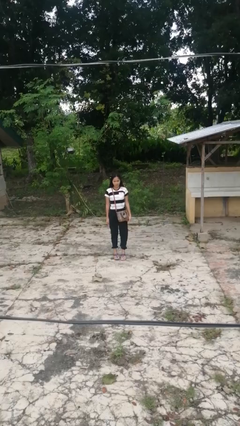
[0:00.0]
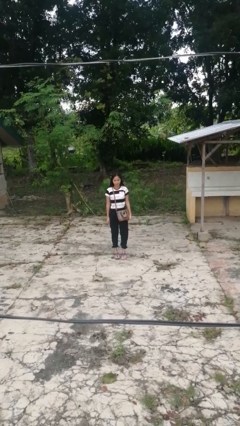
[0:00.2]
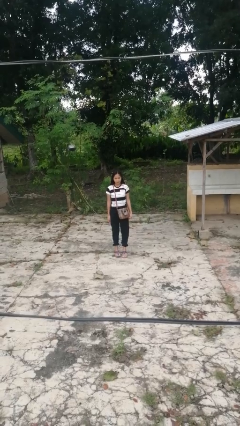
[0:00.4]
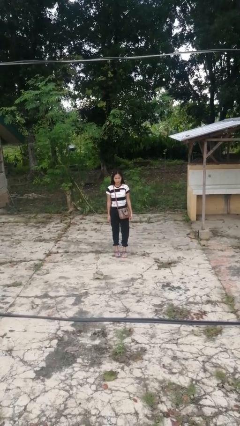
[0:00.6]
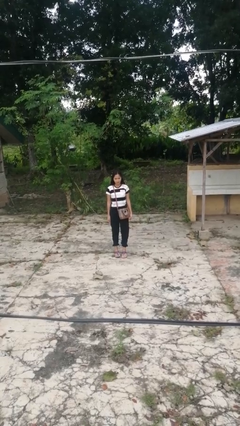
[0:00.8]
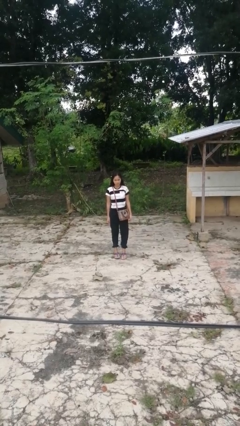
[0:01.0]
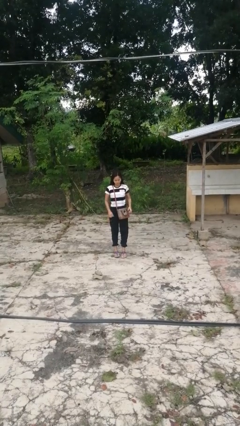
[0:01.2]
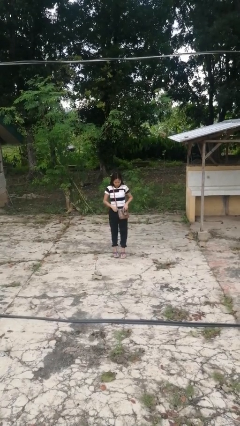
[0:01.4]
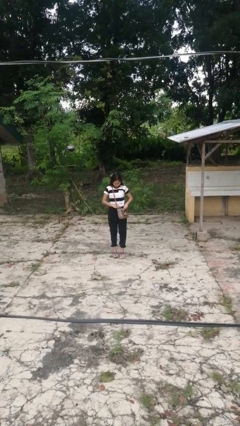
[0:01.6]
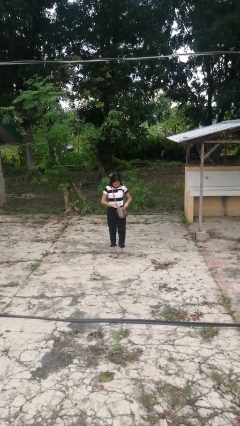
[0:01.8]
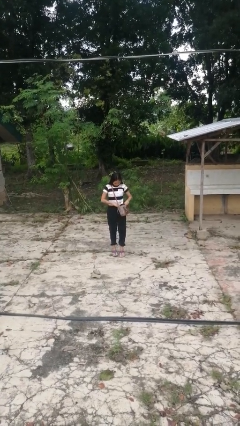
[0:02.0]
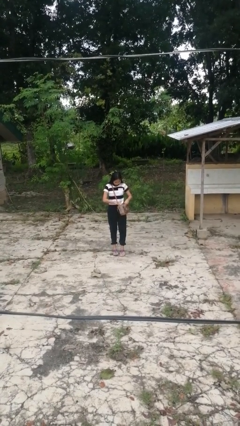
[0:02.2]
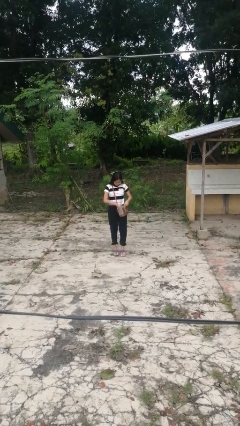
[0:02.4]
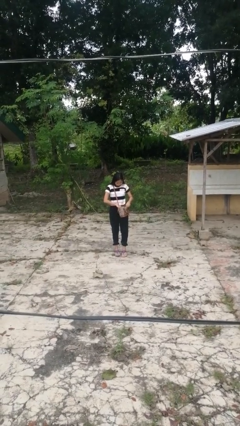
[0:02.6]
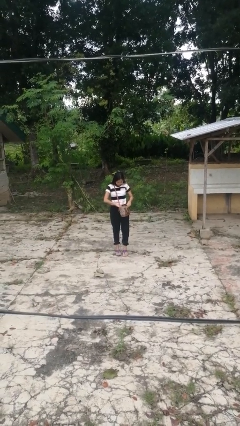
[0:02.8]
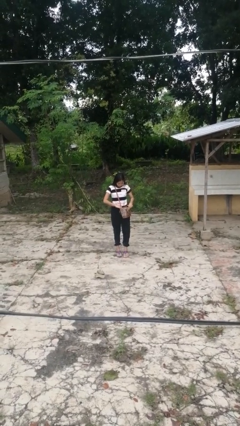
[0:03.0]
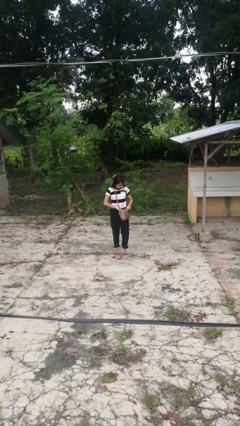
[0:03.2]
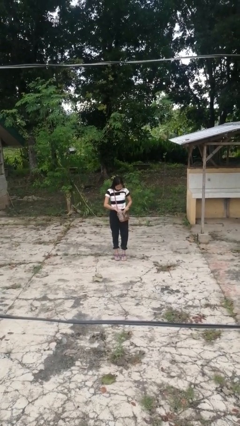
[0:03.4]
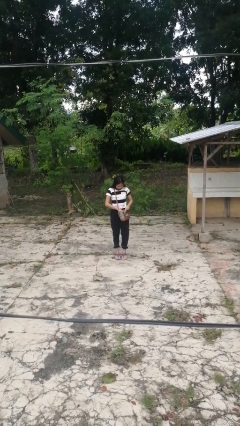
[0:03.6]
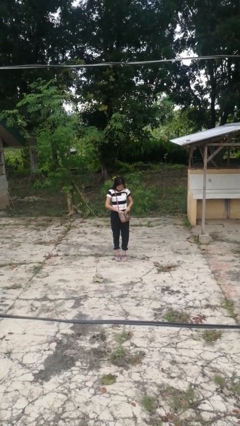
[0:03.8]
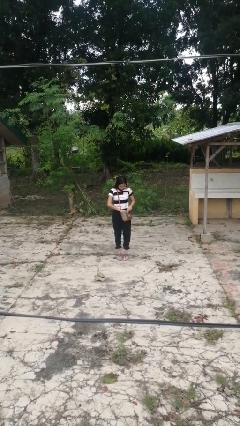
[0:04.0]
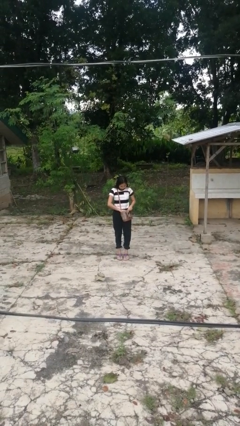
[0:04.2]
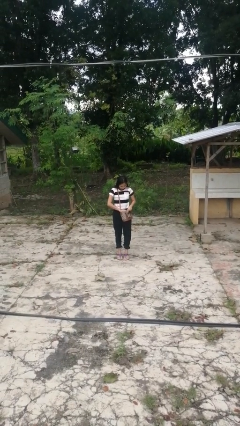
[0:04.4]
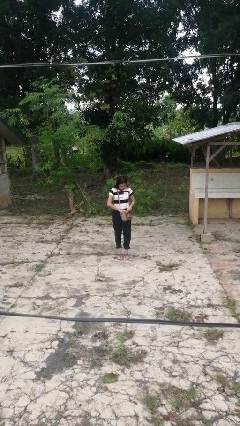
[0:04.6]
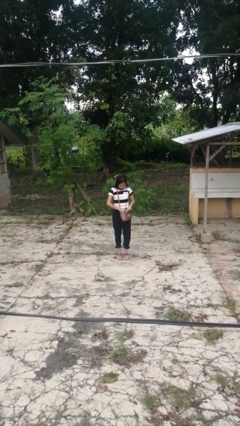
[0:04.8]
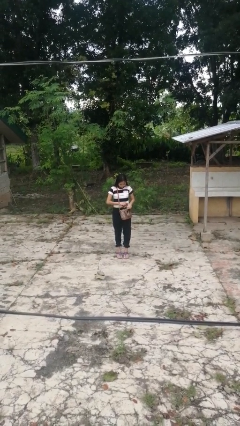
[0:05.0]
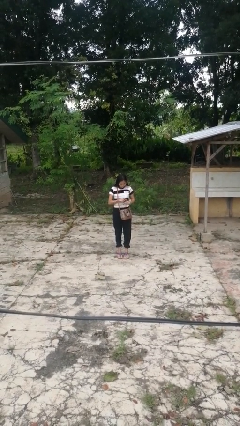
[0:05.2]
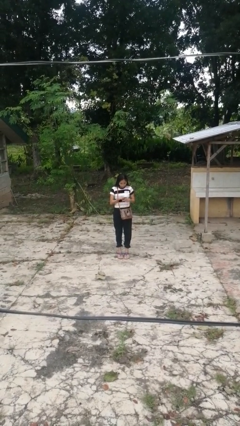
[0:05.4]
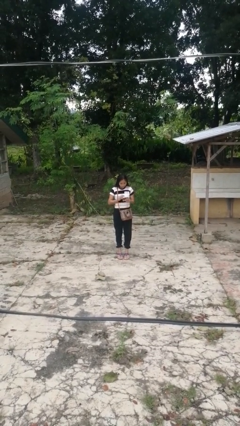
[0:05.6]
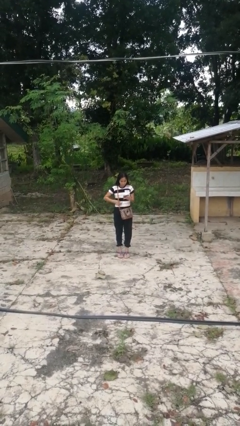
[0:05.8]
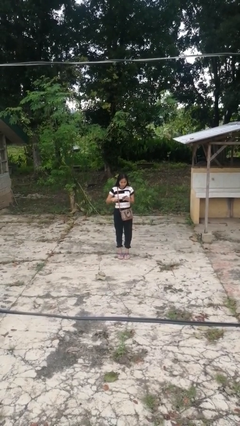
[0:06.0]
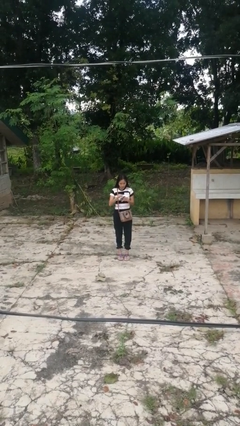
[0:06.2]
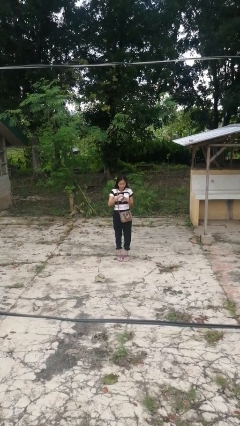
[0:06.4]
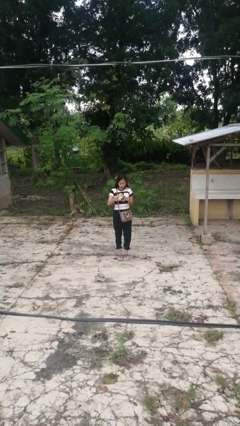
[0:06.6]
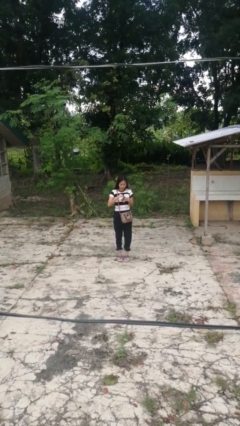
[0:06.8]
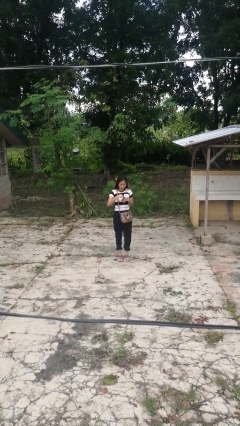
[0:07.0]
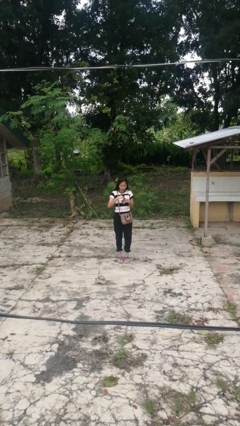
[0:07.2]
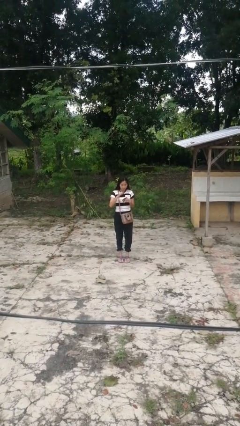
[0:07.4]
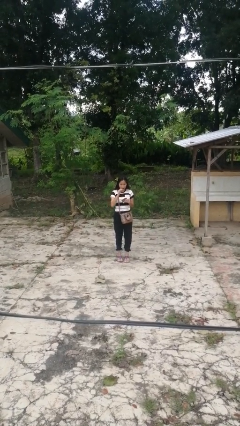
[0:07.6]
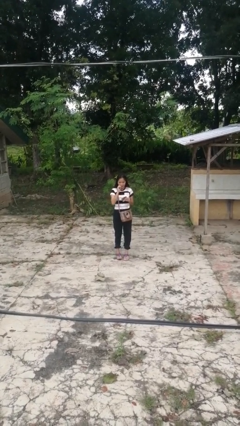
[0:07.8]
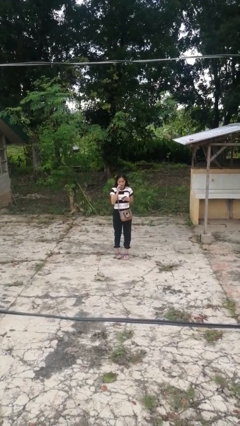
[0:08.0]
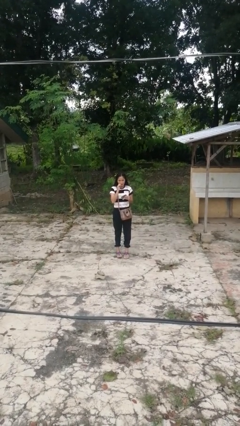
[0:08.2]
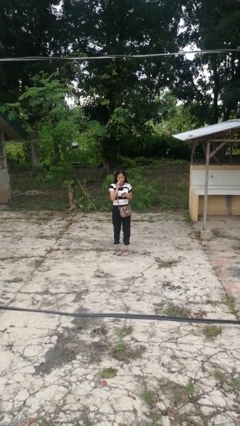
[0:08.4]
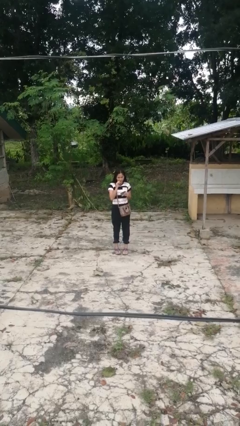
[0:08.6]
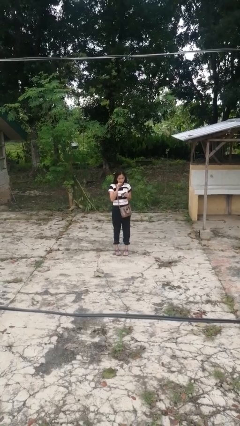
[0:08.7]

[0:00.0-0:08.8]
person eats snack from bag

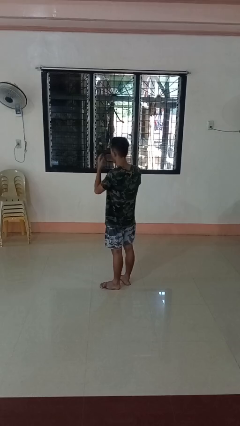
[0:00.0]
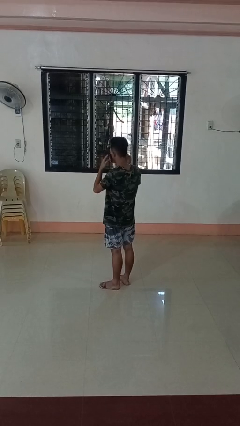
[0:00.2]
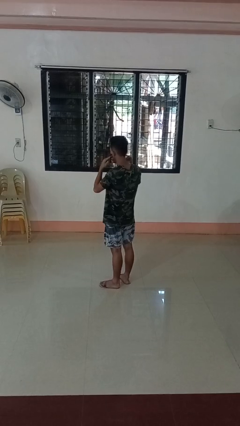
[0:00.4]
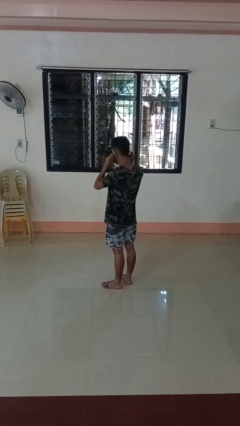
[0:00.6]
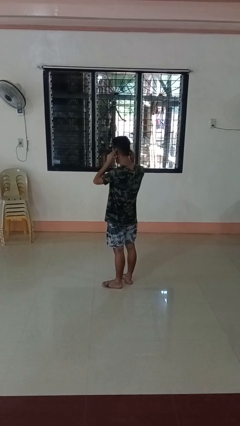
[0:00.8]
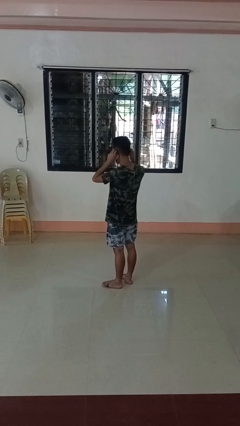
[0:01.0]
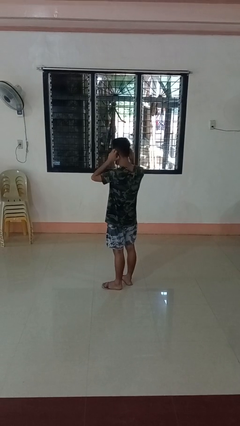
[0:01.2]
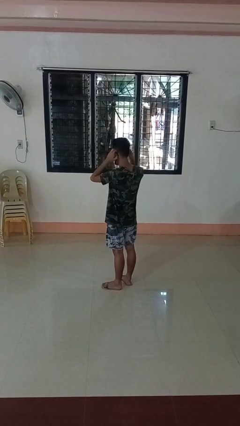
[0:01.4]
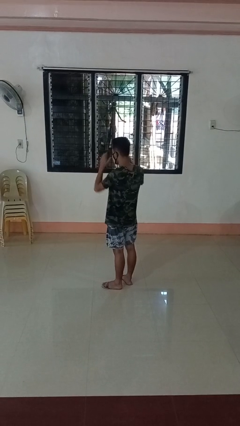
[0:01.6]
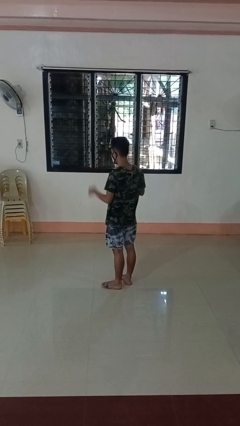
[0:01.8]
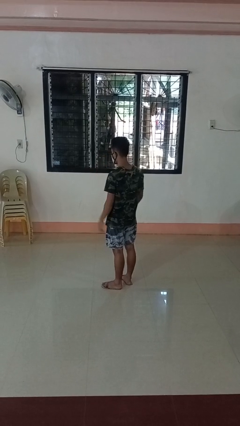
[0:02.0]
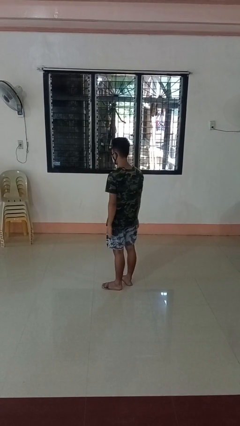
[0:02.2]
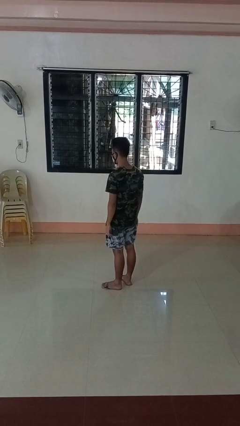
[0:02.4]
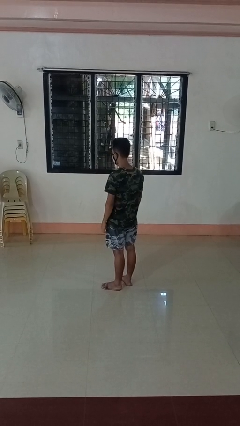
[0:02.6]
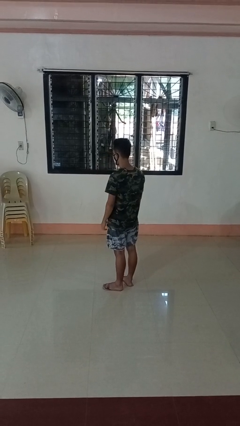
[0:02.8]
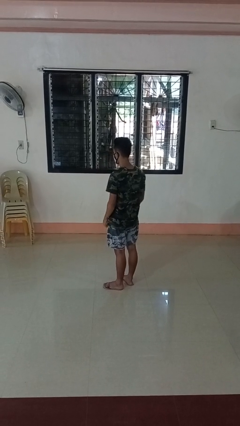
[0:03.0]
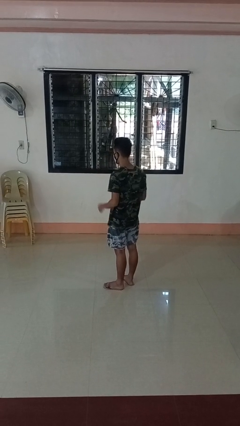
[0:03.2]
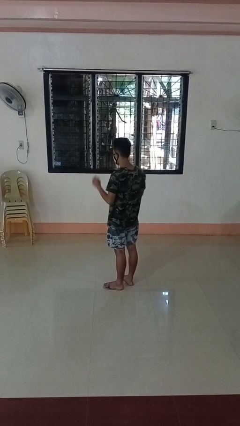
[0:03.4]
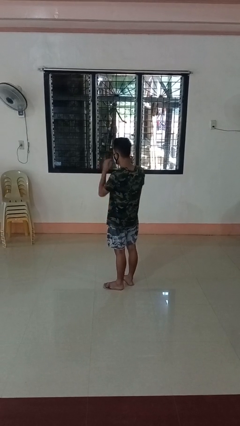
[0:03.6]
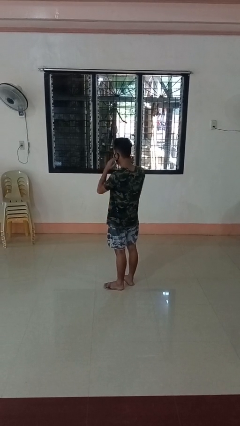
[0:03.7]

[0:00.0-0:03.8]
person puts on facemask

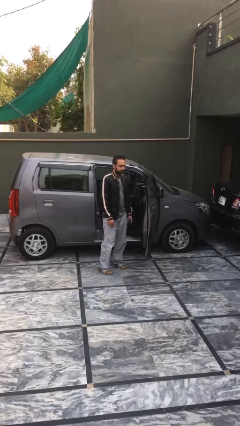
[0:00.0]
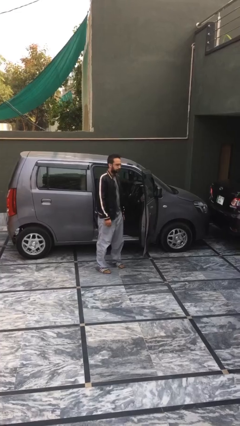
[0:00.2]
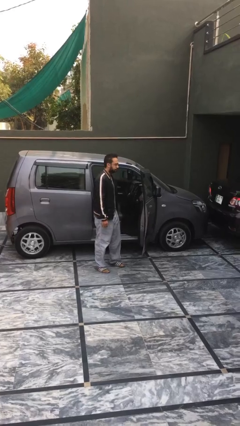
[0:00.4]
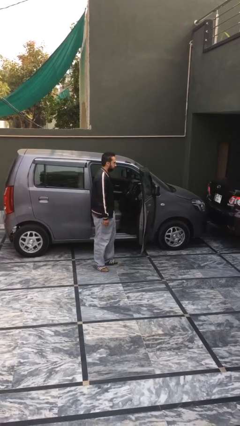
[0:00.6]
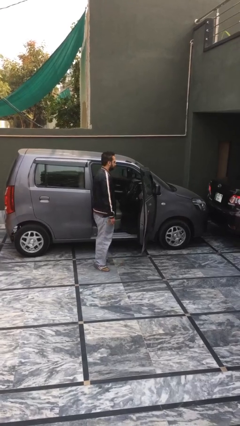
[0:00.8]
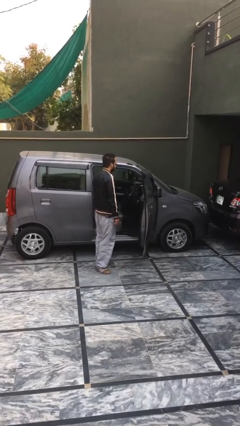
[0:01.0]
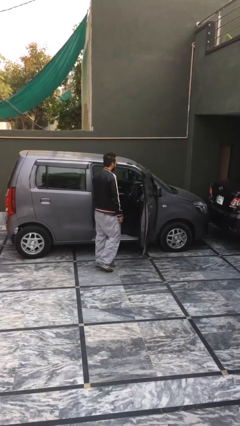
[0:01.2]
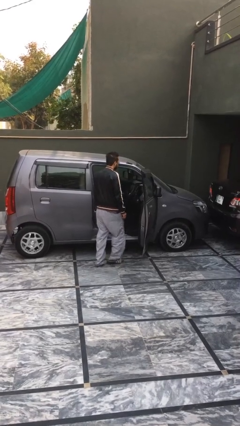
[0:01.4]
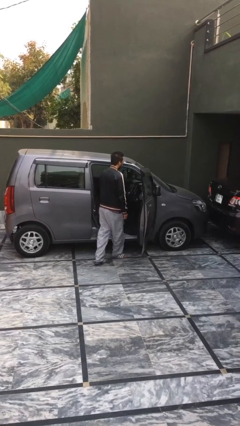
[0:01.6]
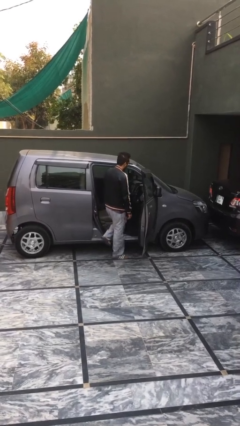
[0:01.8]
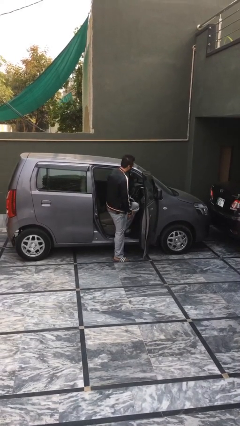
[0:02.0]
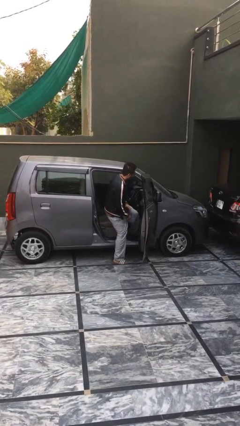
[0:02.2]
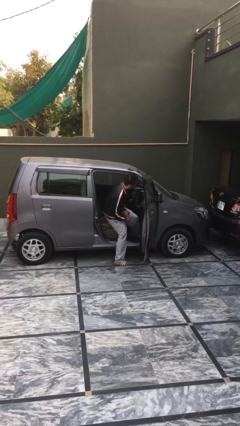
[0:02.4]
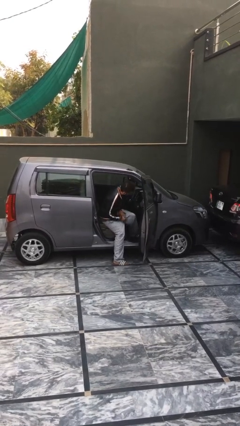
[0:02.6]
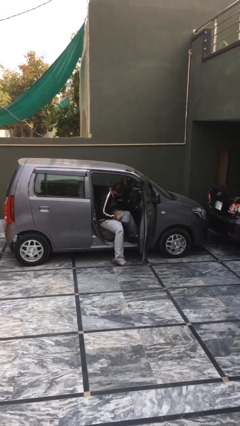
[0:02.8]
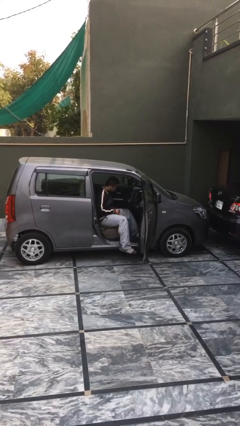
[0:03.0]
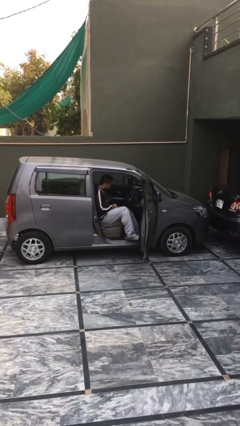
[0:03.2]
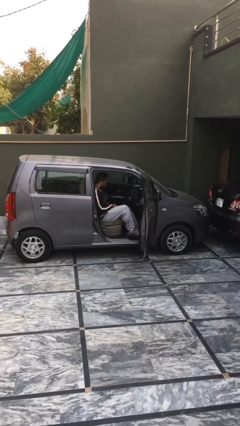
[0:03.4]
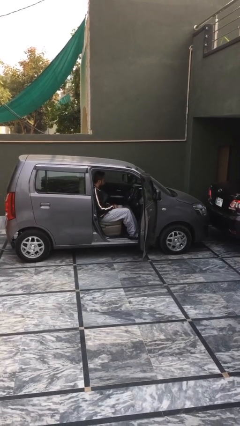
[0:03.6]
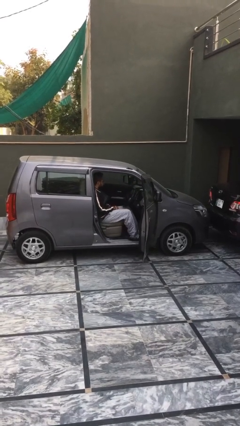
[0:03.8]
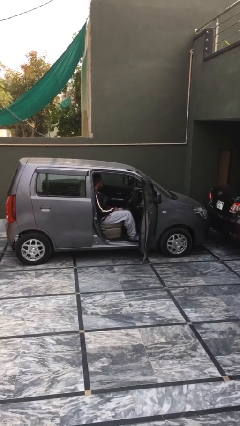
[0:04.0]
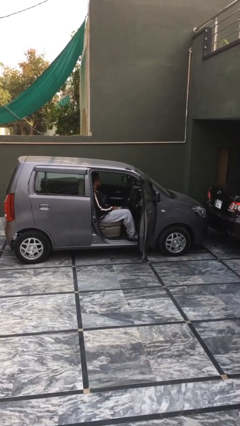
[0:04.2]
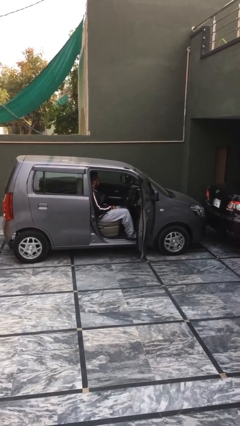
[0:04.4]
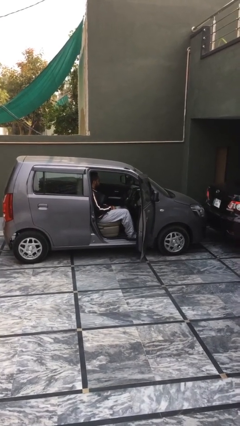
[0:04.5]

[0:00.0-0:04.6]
person enters car

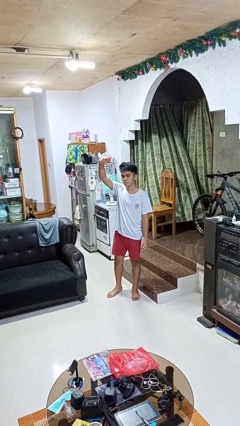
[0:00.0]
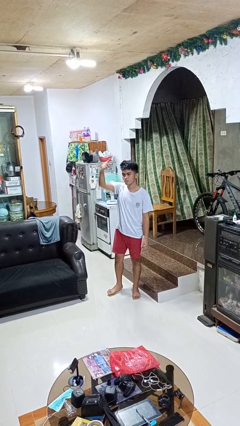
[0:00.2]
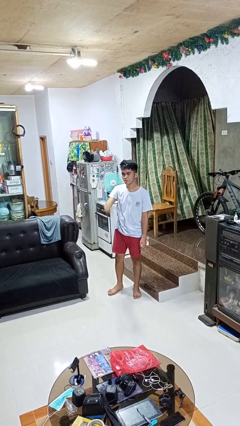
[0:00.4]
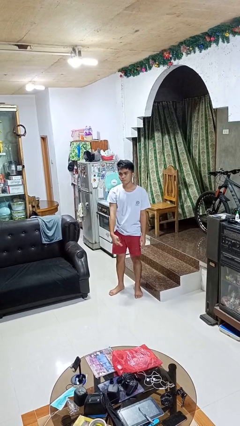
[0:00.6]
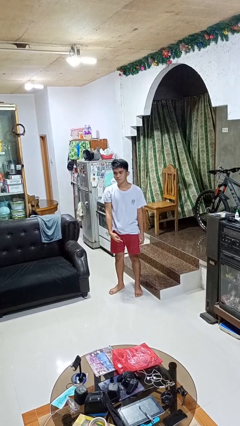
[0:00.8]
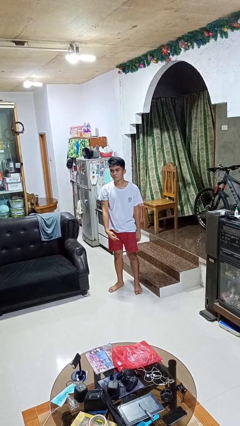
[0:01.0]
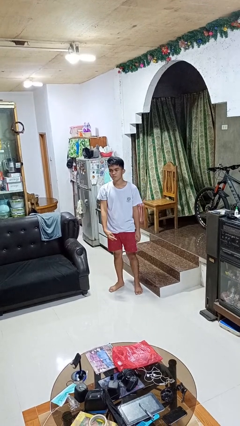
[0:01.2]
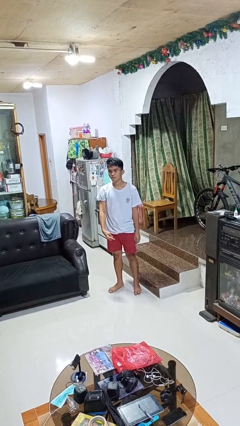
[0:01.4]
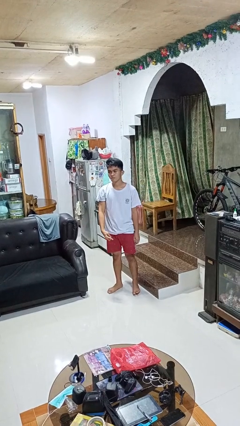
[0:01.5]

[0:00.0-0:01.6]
person gestures swipe down
